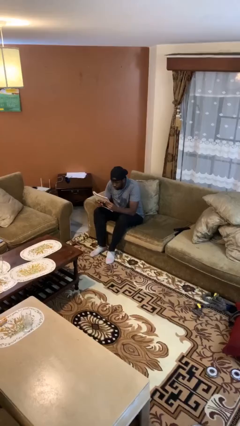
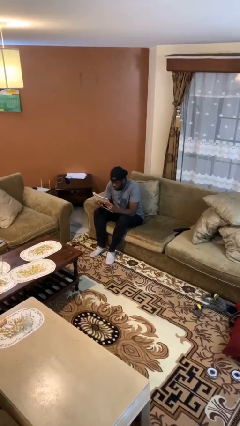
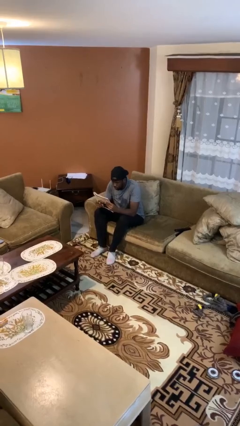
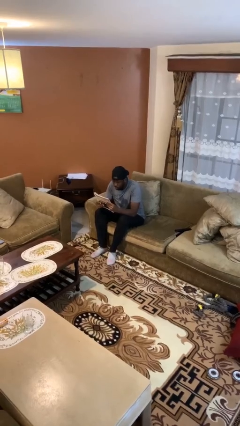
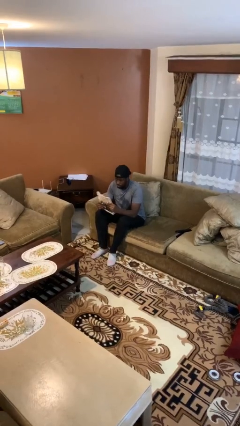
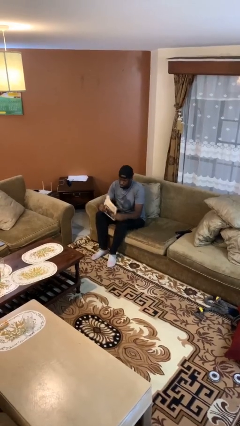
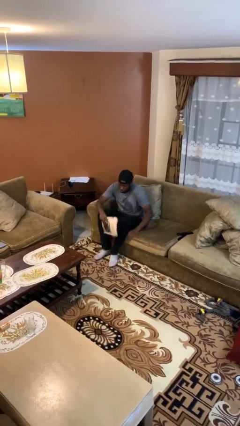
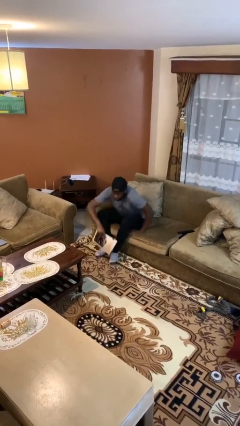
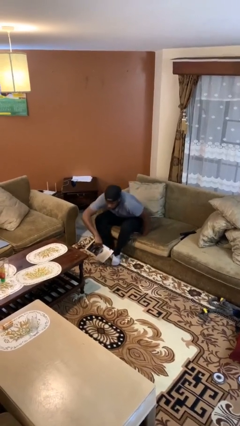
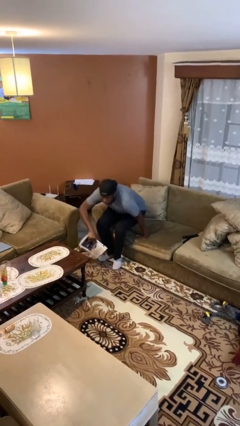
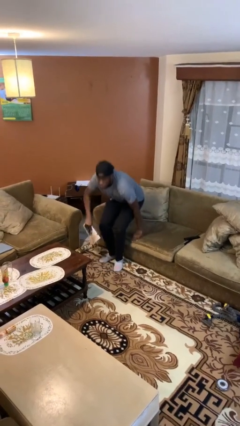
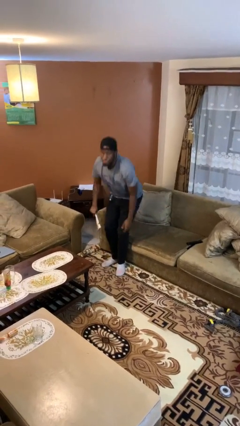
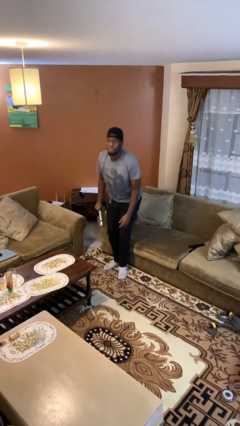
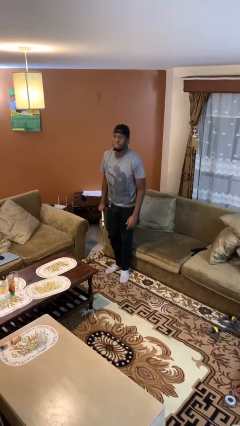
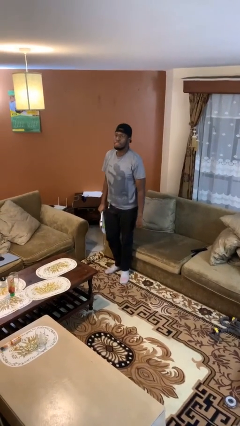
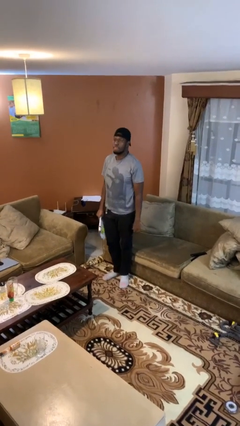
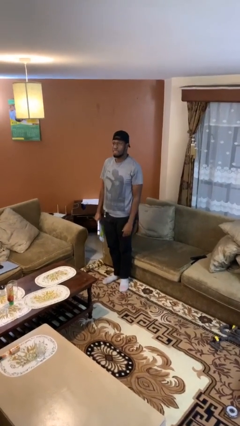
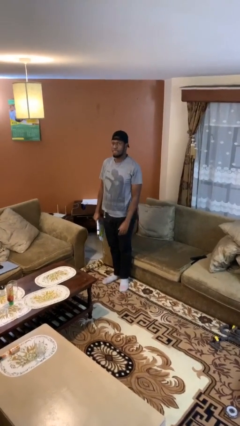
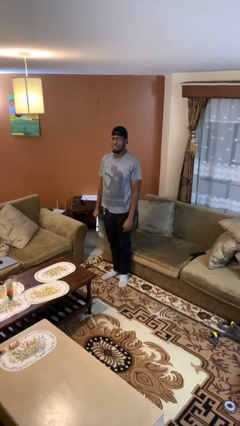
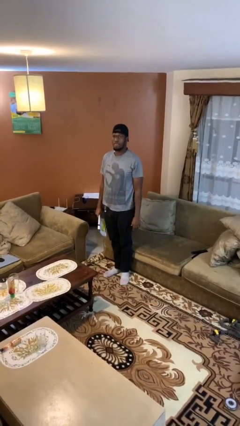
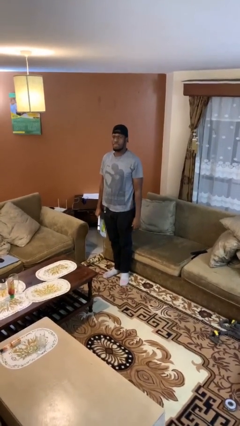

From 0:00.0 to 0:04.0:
person stands up

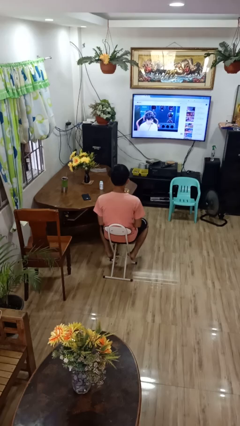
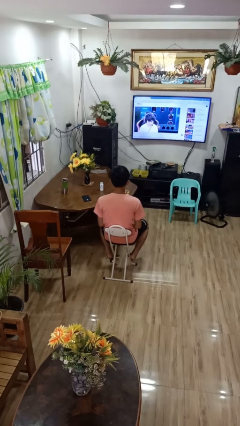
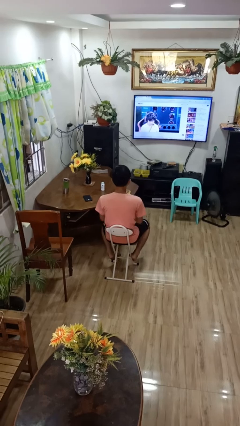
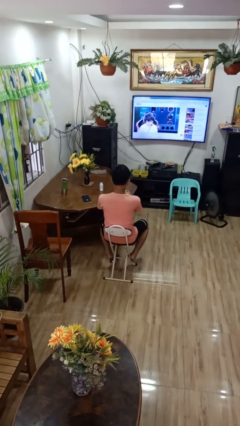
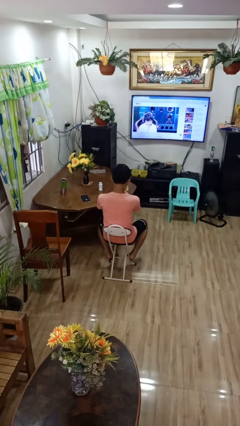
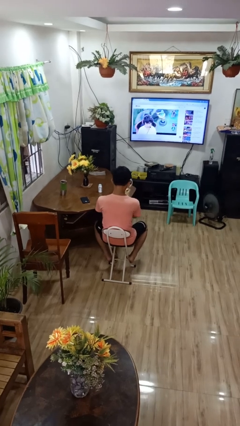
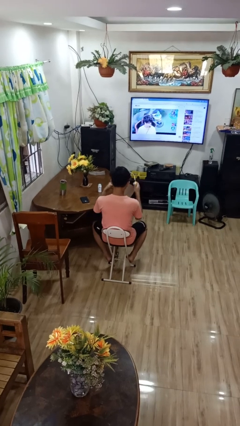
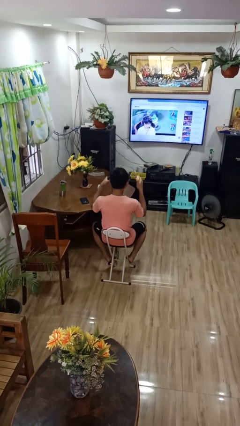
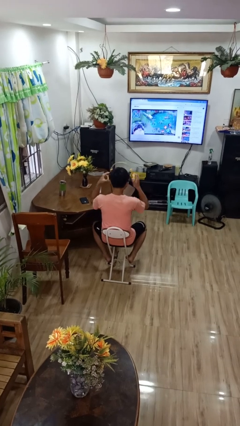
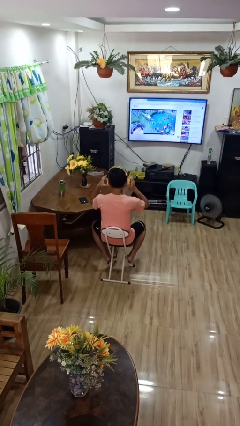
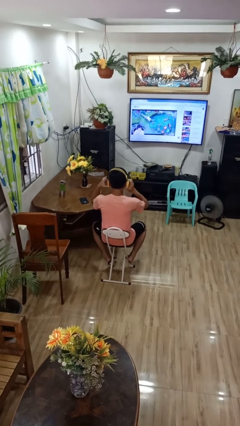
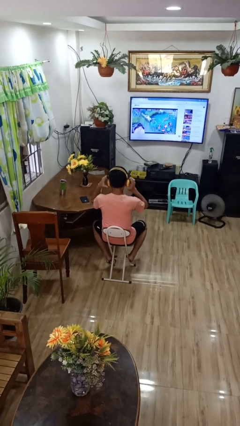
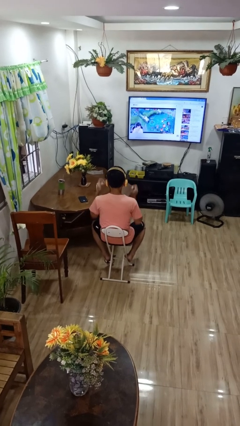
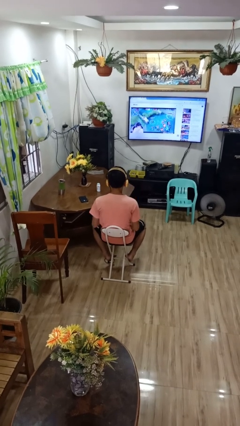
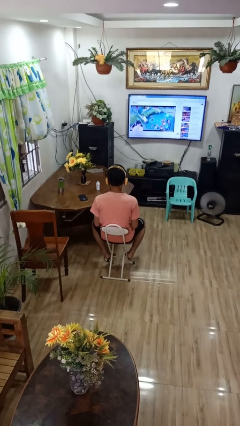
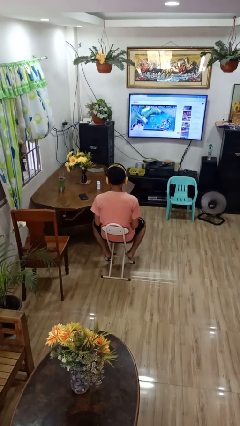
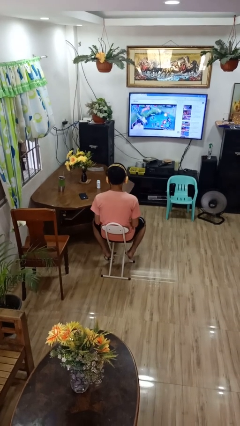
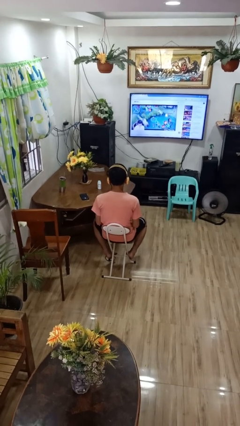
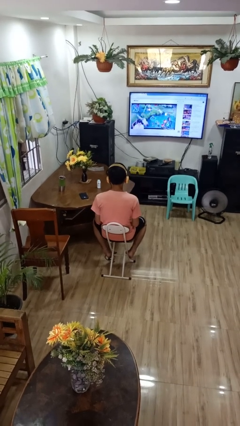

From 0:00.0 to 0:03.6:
person puts on headphones

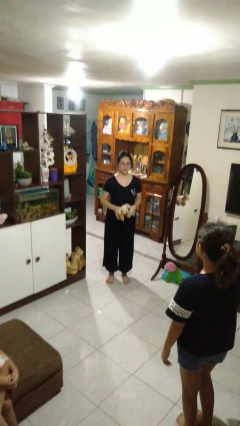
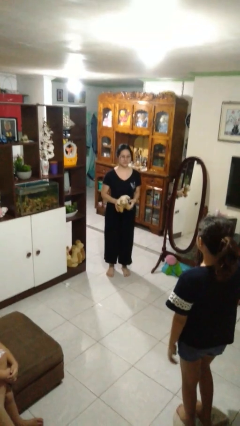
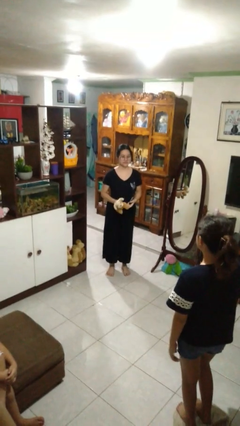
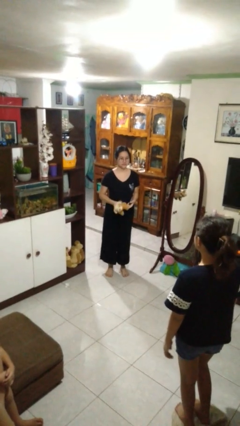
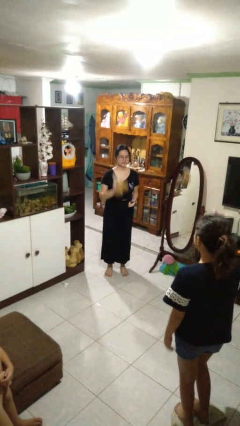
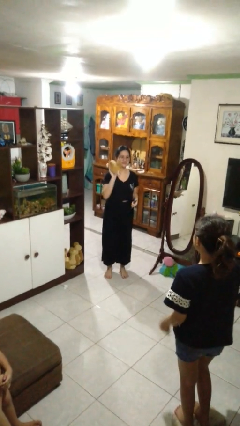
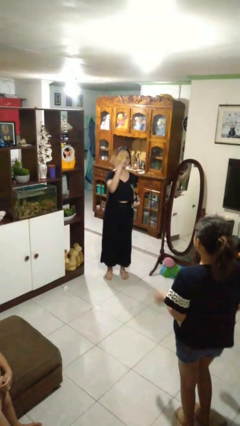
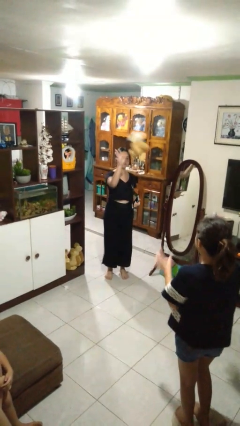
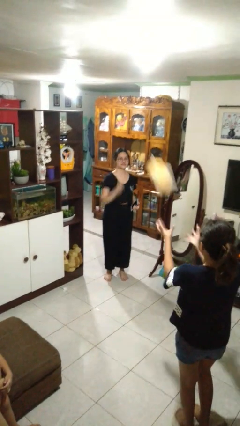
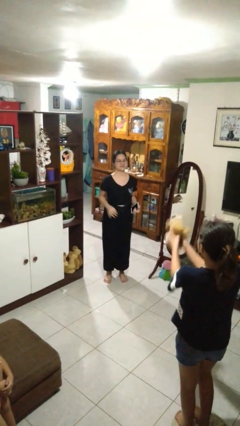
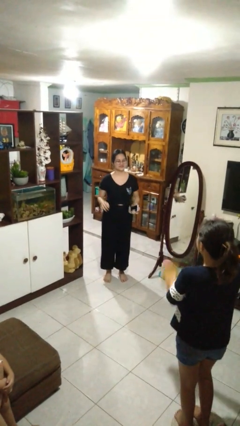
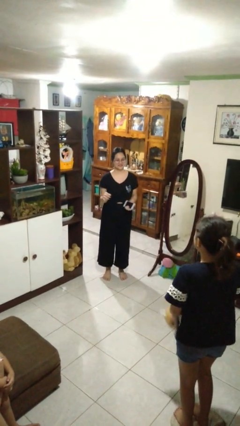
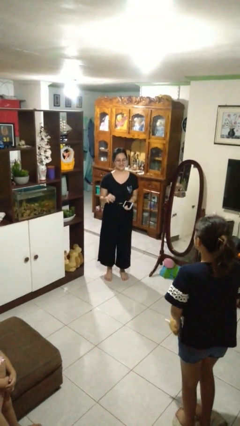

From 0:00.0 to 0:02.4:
person throws object to person

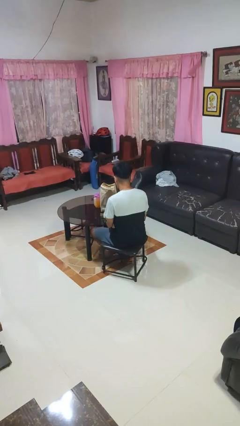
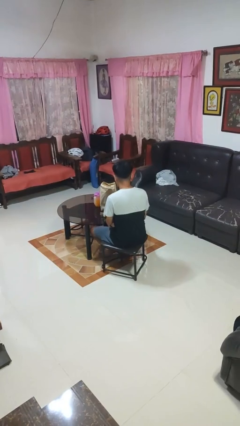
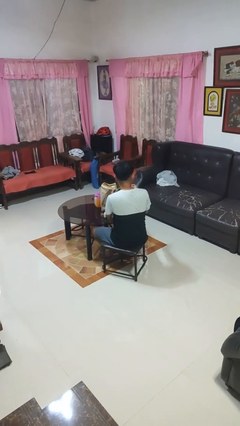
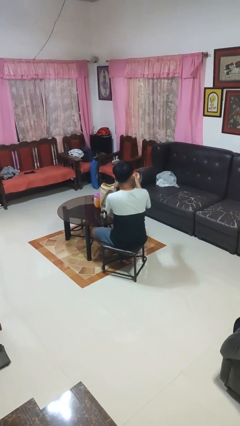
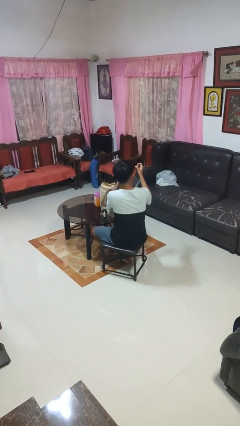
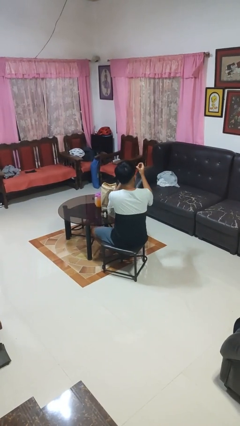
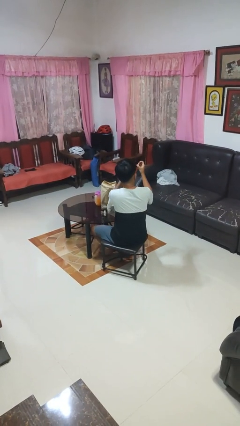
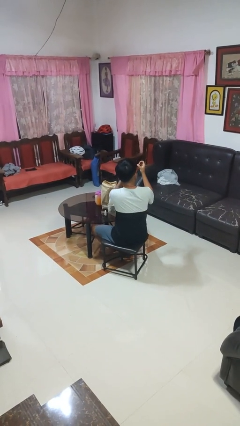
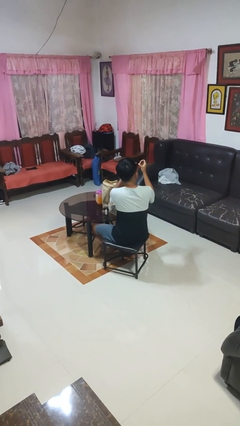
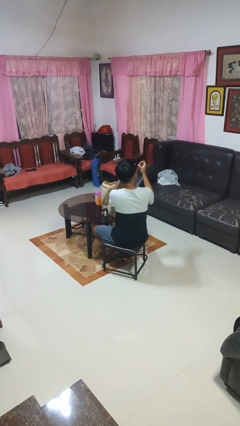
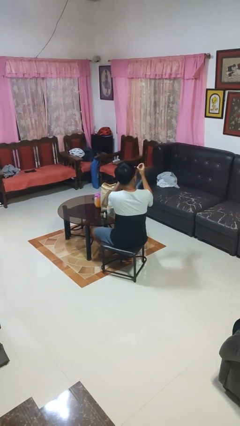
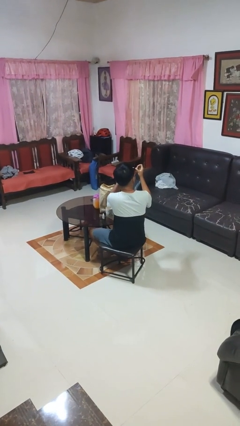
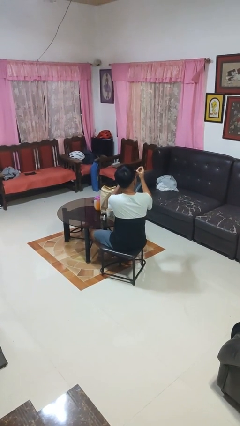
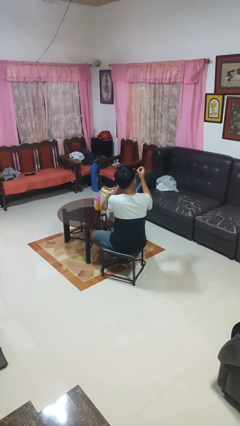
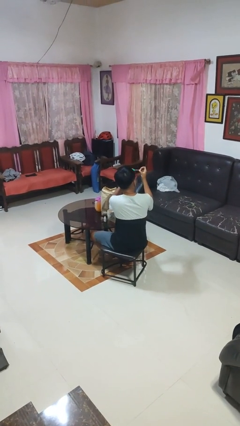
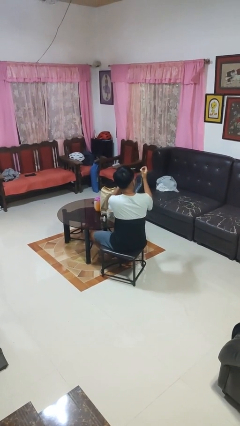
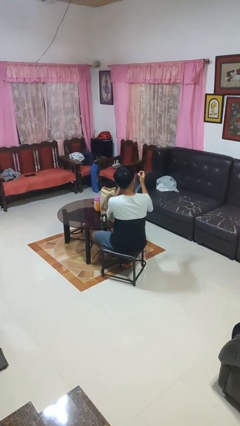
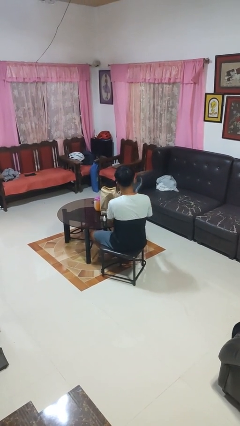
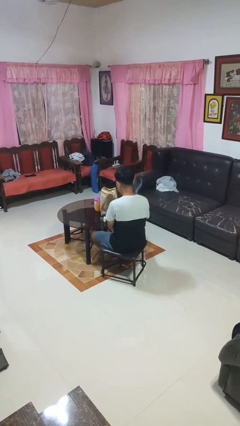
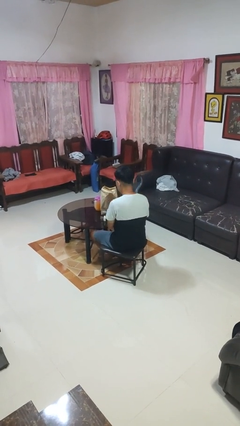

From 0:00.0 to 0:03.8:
person paints fingernails

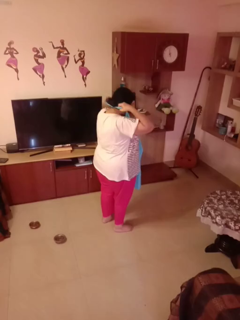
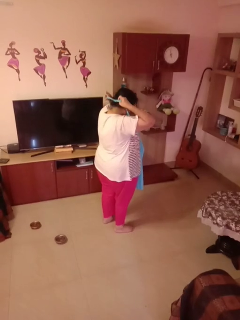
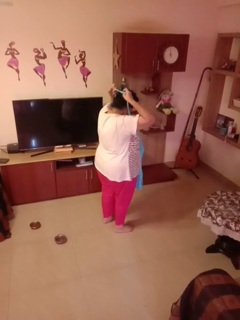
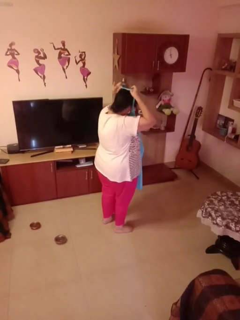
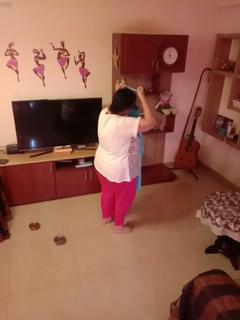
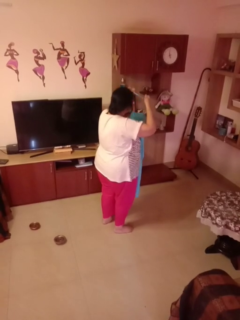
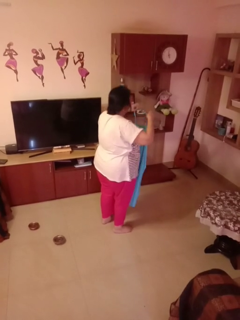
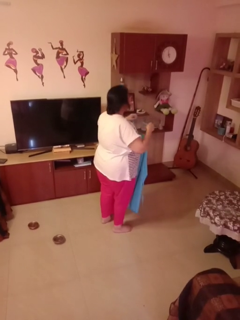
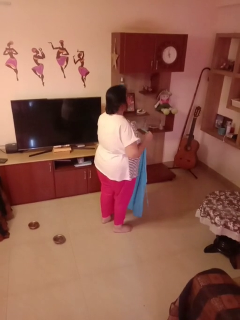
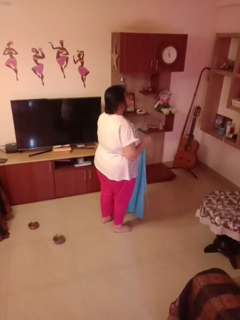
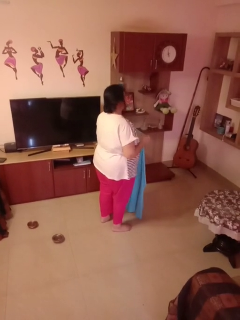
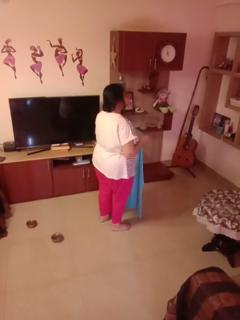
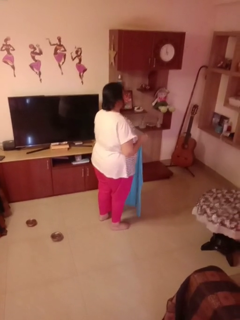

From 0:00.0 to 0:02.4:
person takes off apron

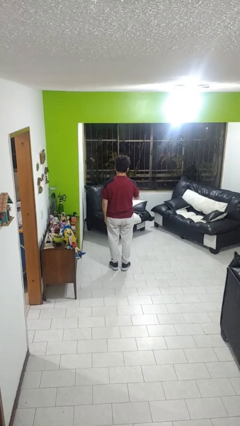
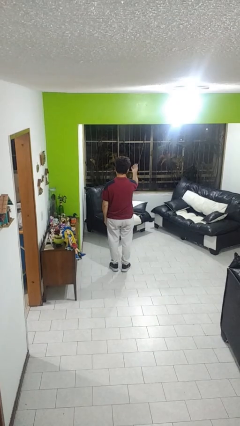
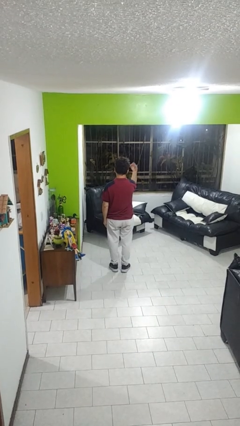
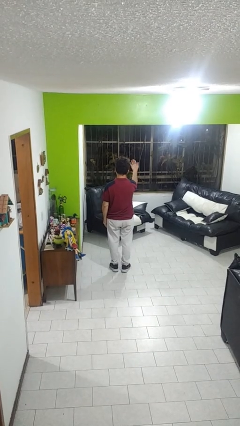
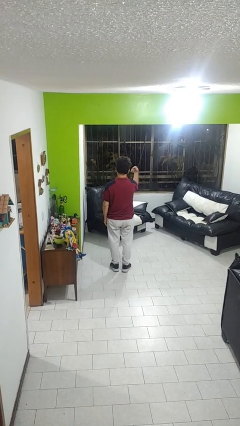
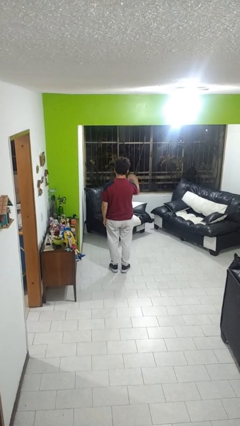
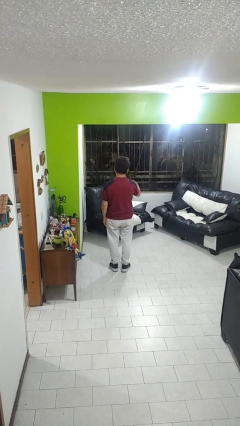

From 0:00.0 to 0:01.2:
person gestures come here

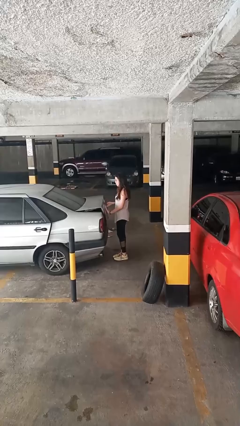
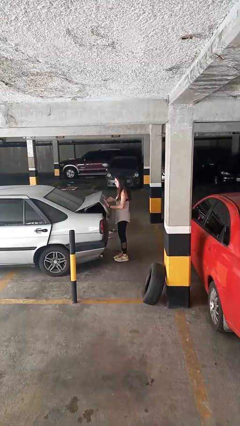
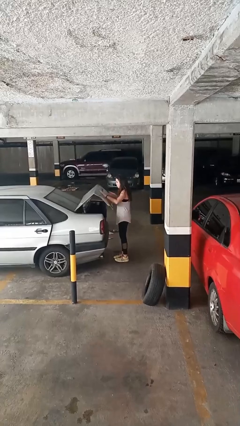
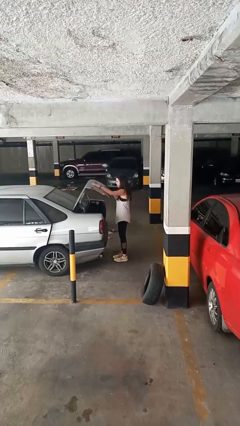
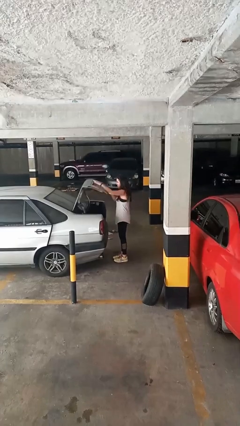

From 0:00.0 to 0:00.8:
person opens car trunk
